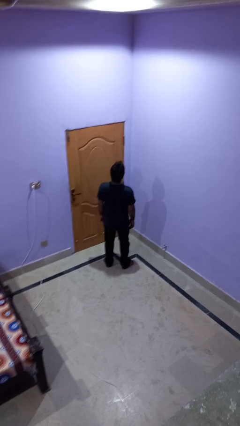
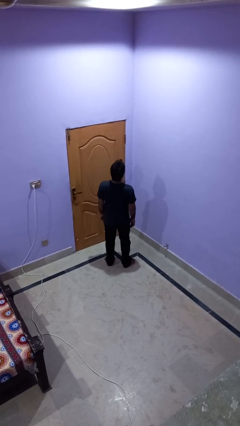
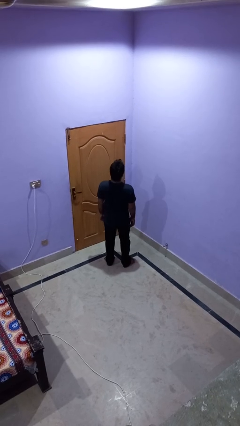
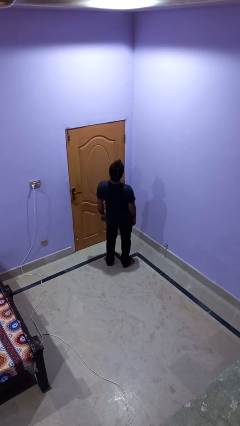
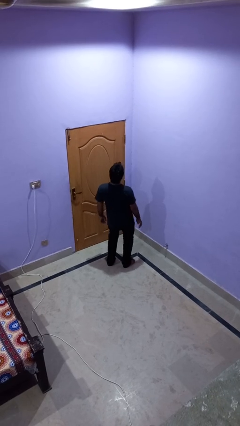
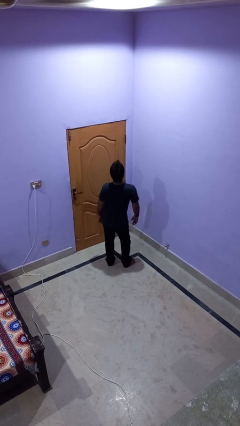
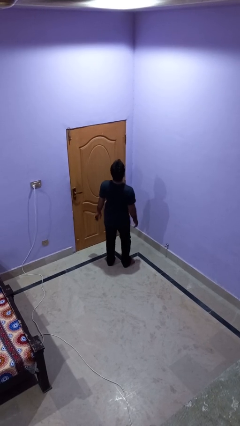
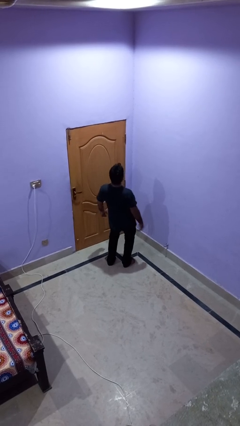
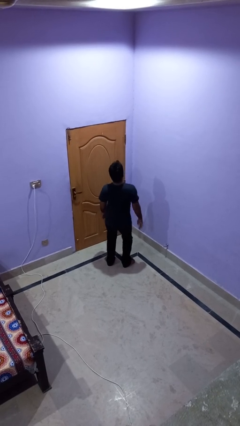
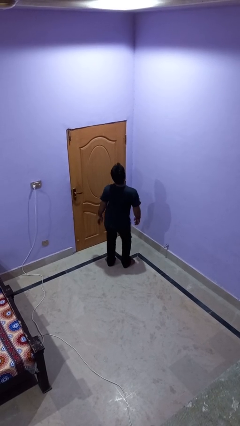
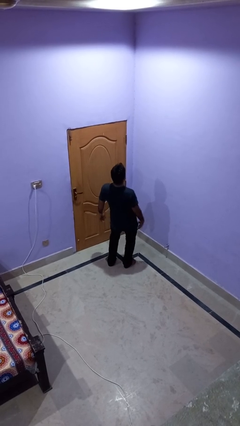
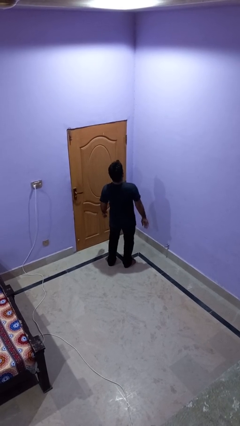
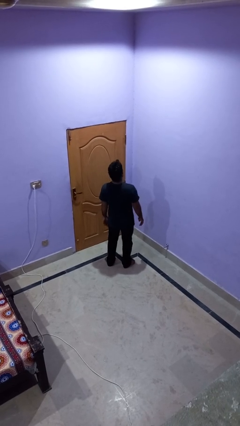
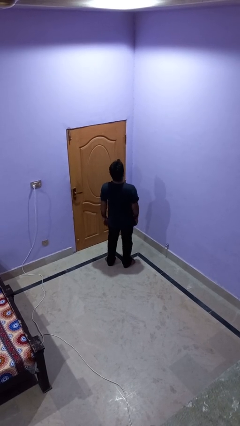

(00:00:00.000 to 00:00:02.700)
person wiggles hips

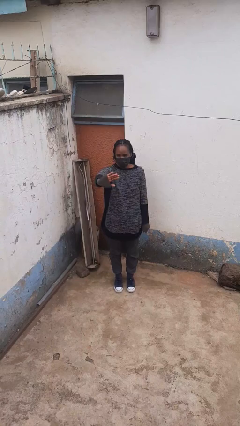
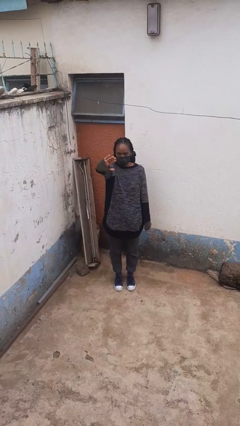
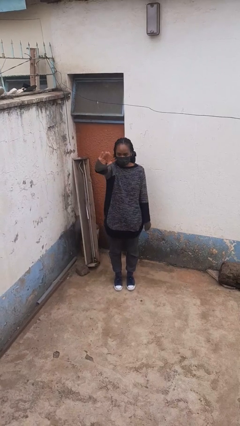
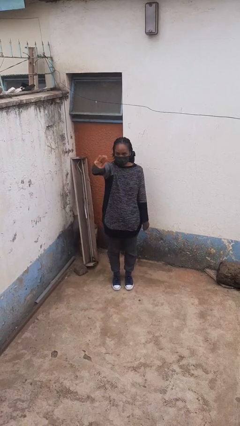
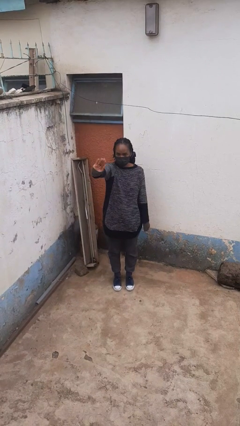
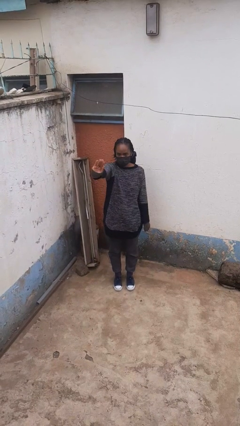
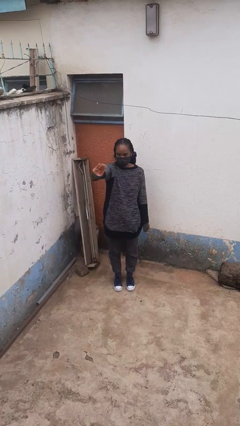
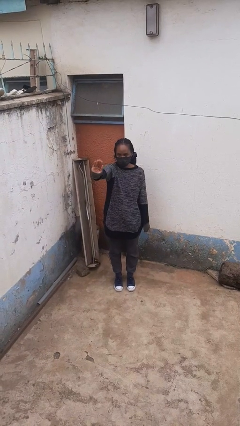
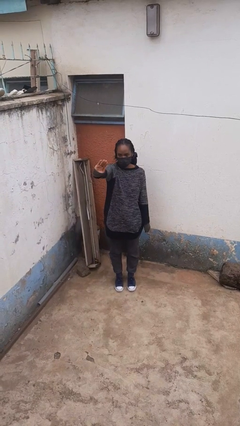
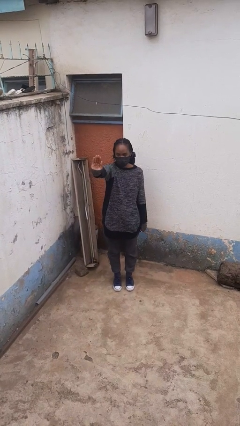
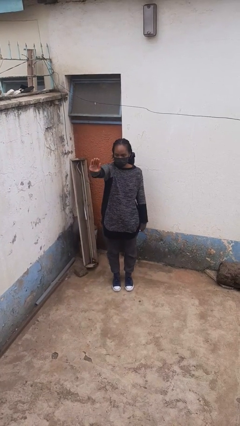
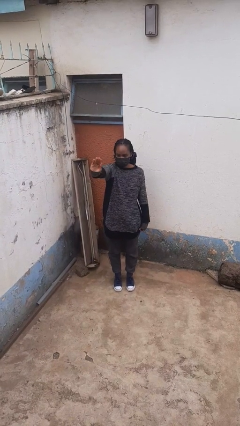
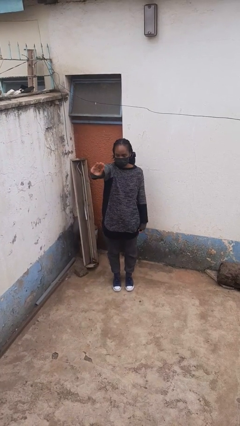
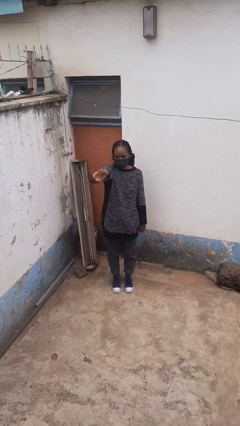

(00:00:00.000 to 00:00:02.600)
person waves at person

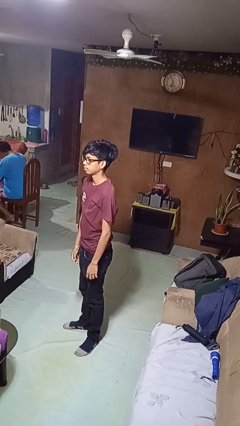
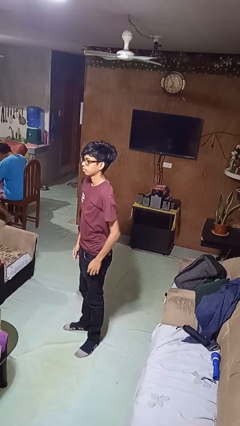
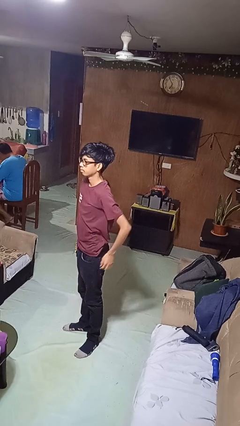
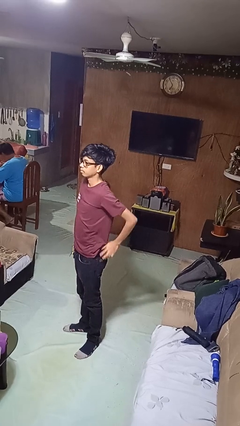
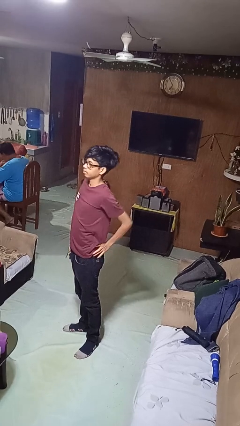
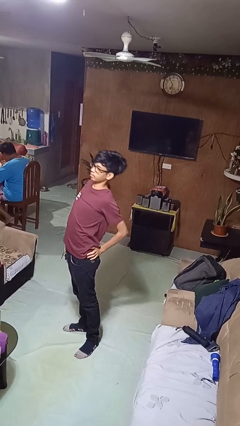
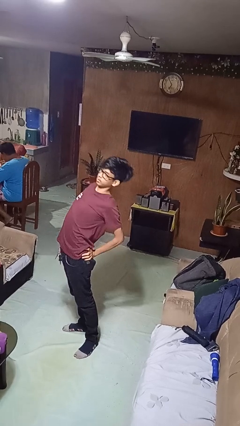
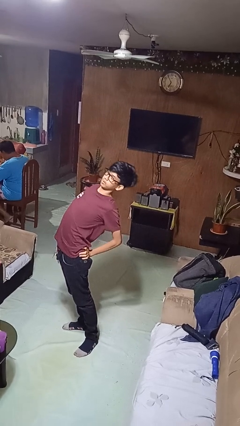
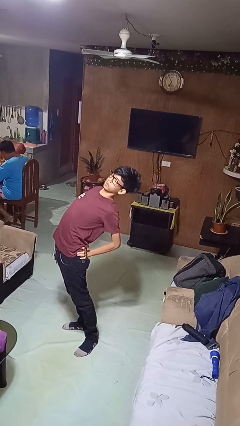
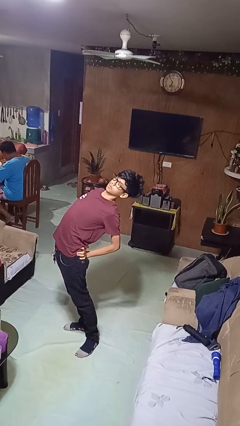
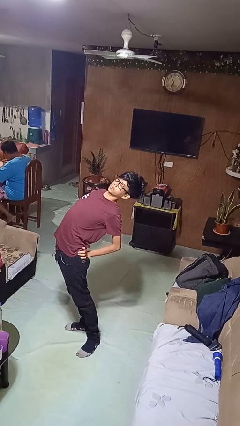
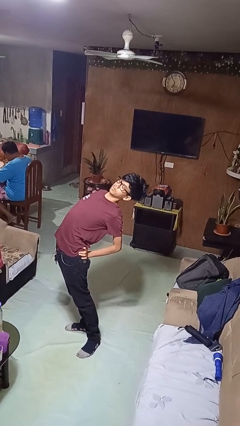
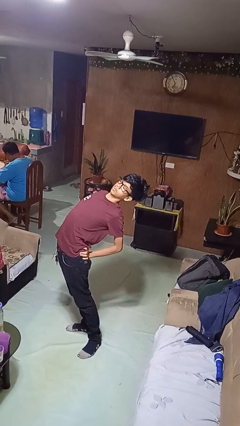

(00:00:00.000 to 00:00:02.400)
person stretches back

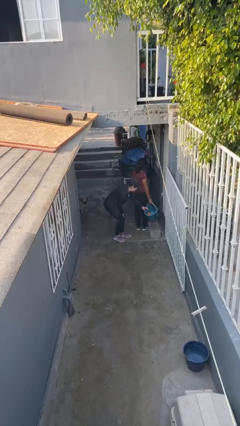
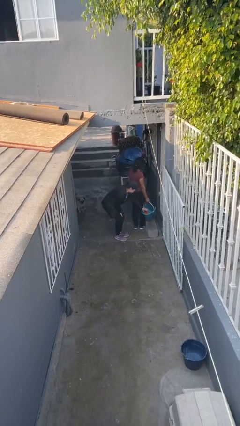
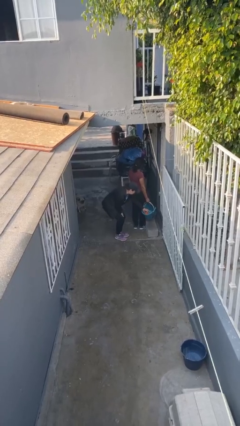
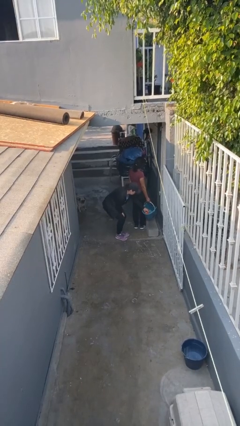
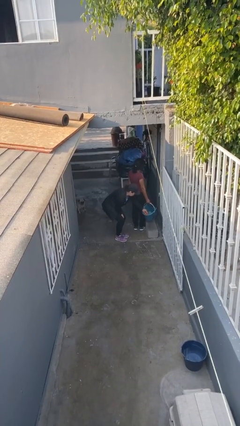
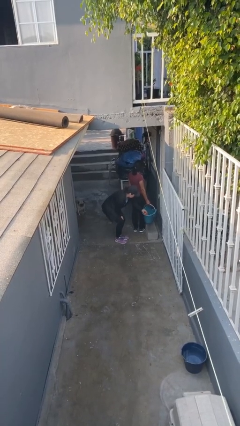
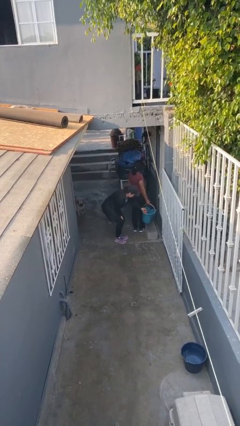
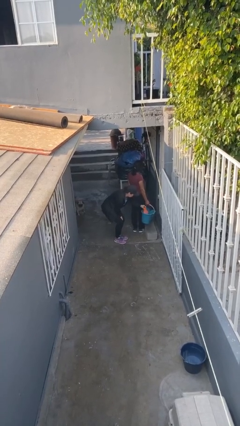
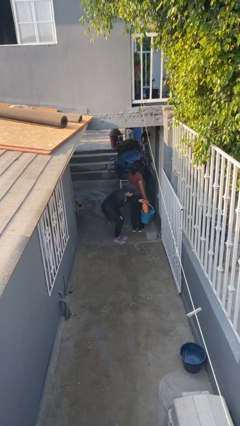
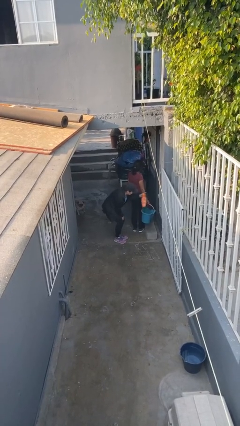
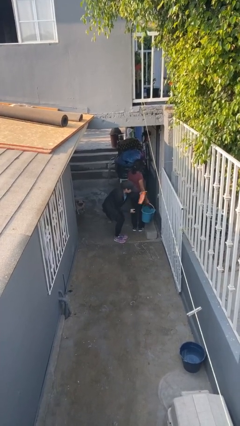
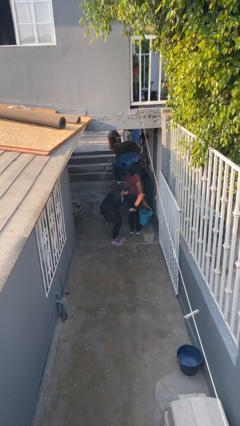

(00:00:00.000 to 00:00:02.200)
person steals object from person

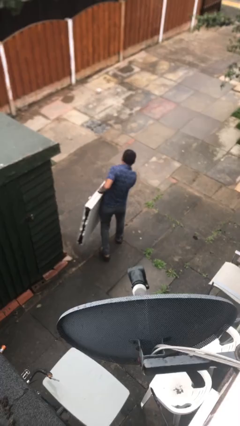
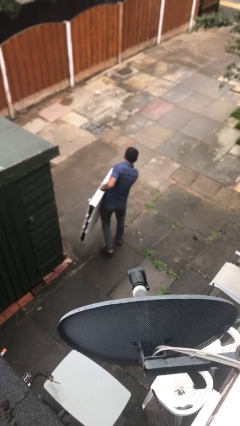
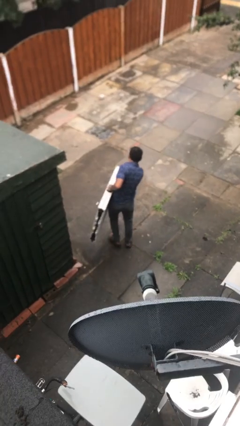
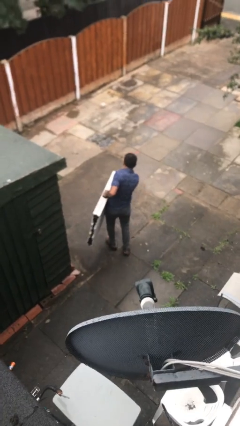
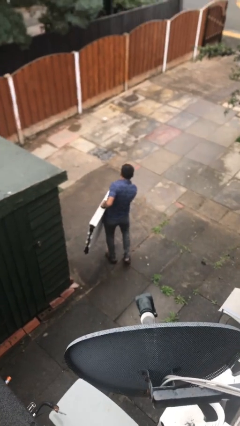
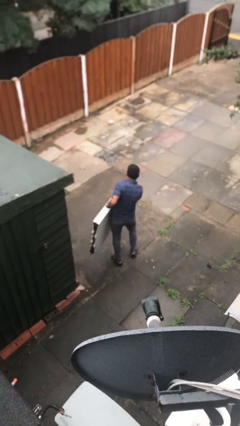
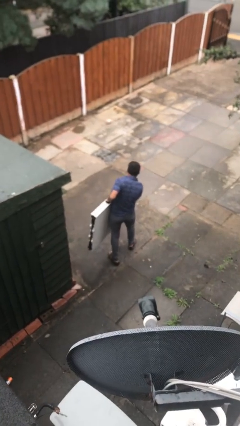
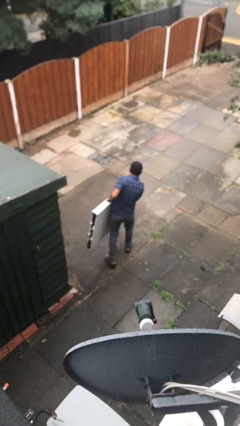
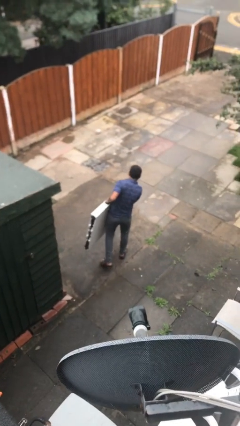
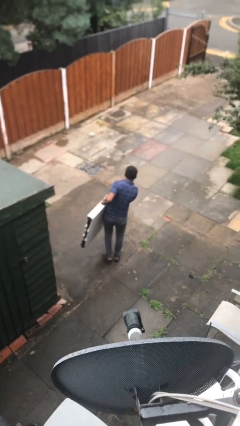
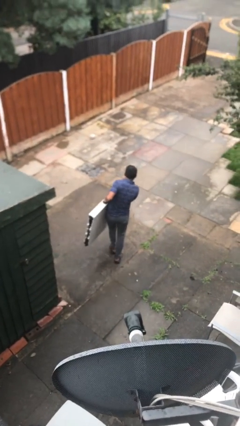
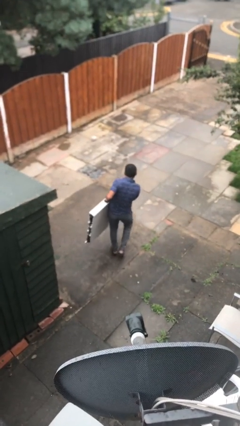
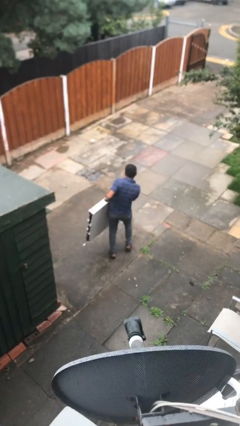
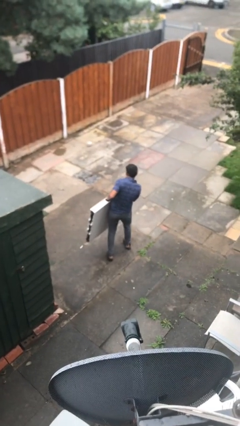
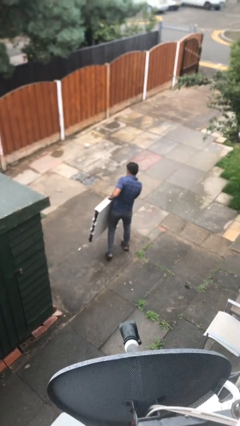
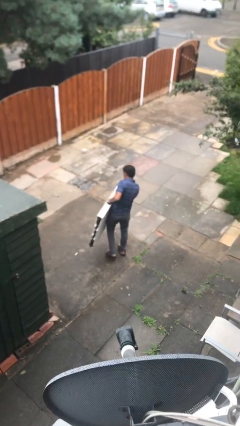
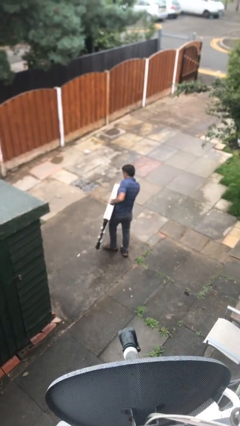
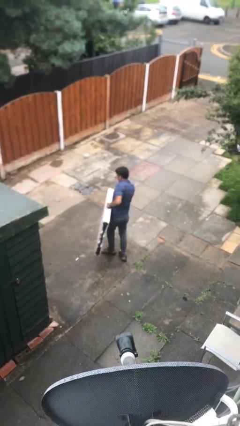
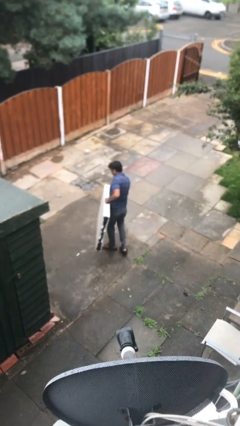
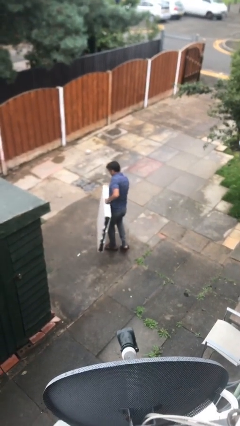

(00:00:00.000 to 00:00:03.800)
person carries heavy object

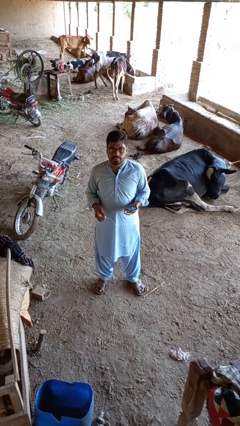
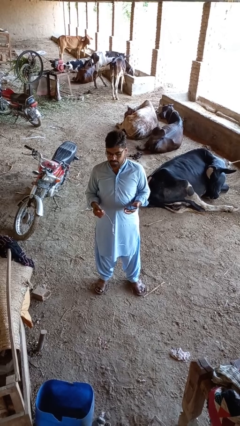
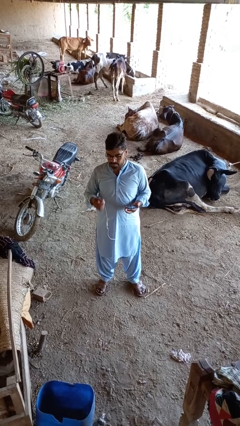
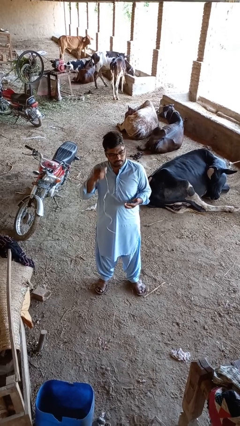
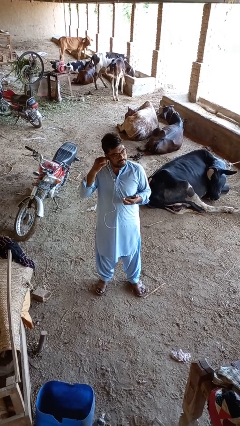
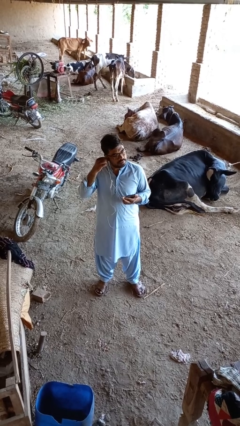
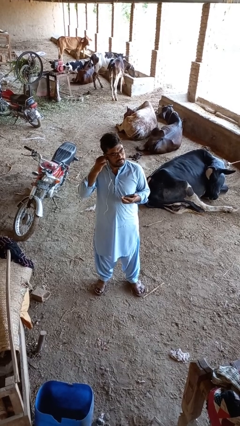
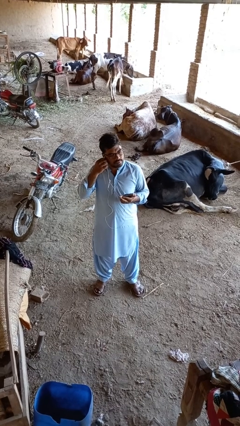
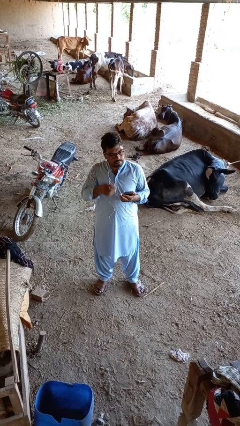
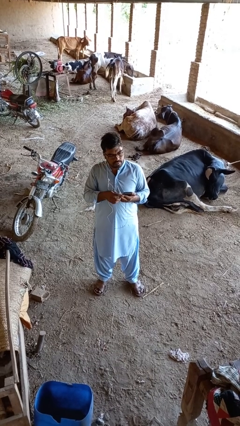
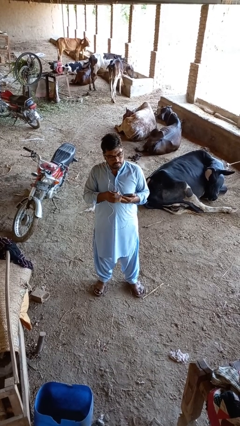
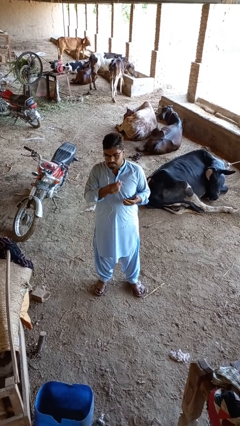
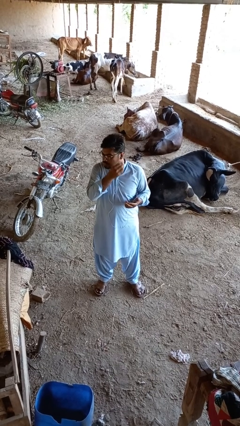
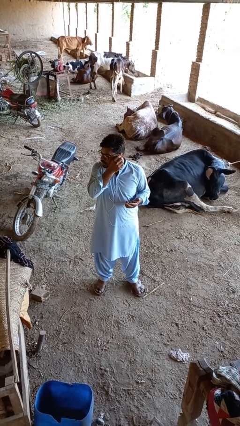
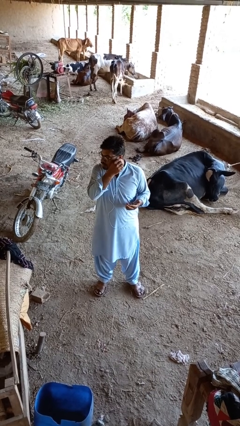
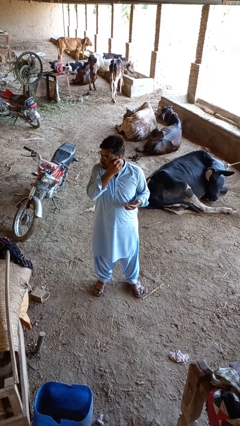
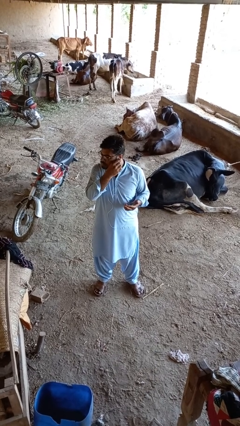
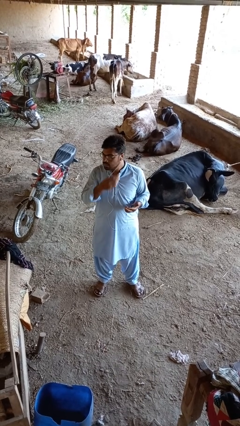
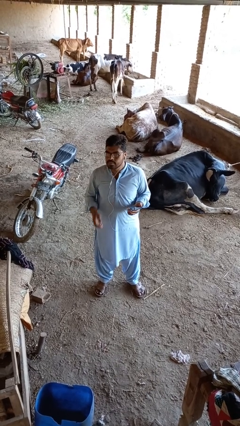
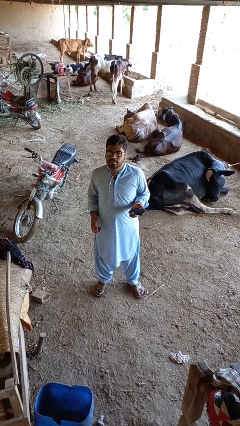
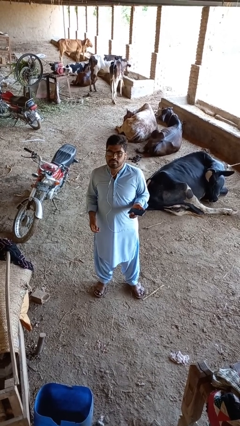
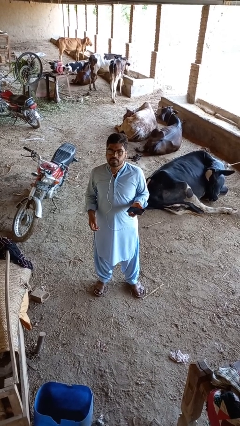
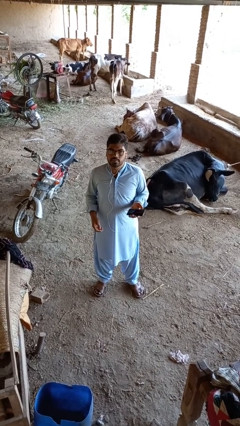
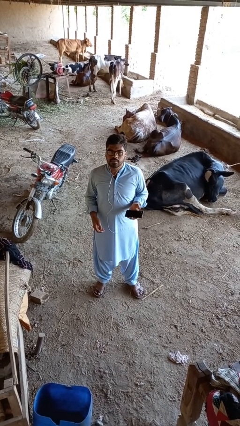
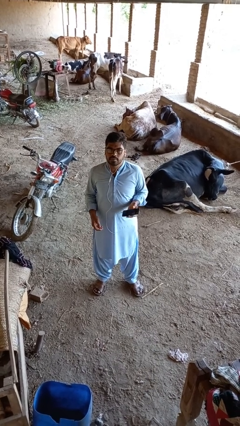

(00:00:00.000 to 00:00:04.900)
person puts on headphones
